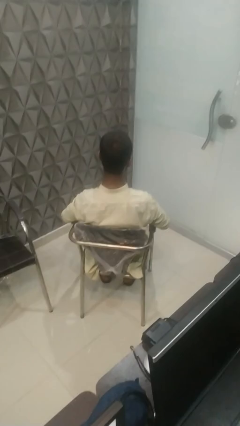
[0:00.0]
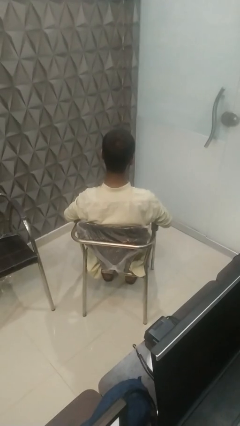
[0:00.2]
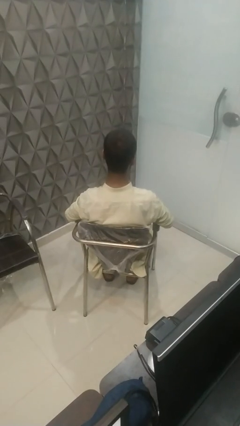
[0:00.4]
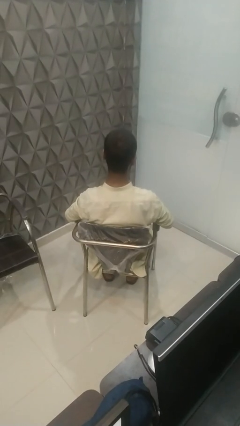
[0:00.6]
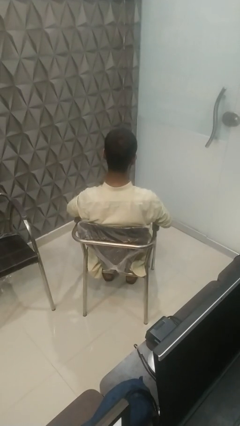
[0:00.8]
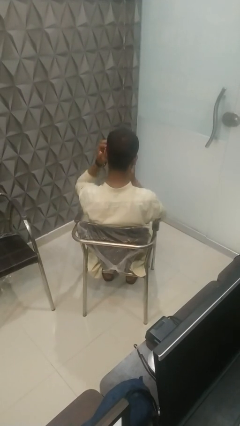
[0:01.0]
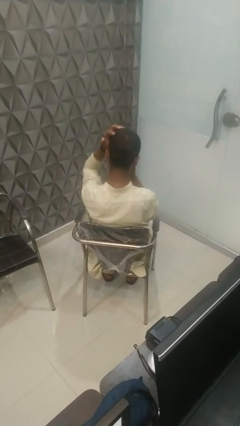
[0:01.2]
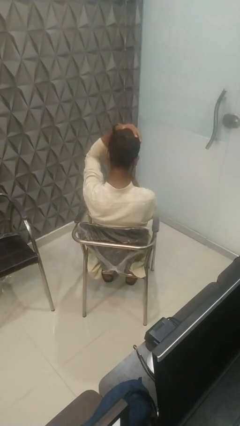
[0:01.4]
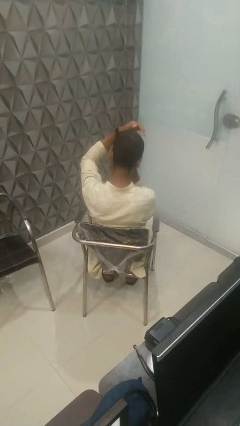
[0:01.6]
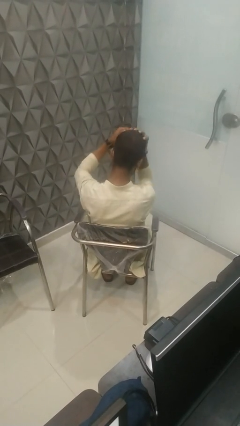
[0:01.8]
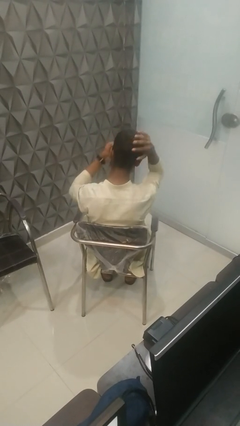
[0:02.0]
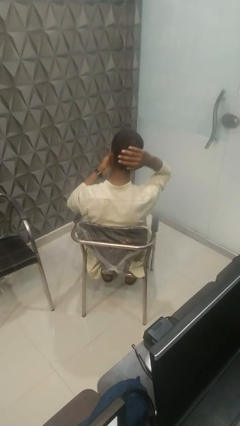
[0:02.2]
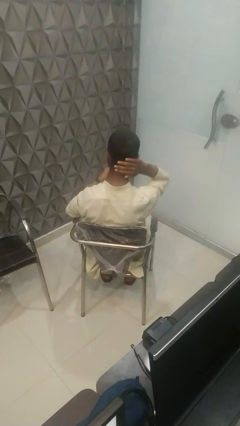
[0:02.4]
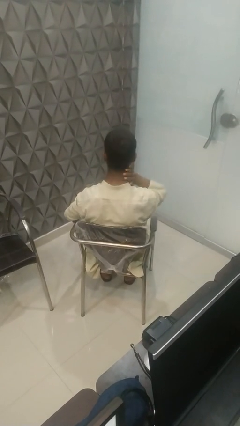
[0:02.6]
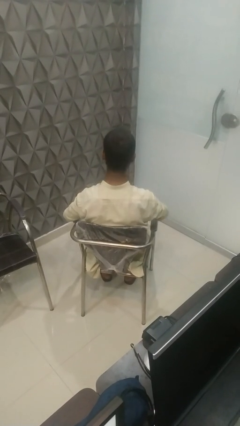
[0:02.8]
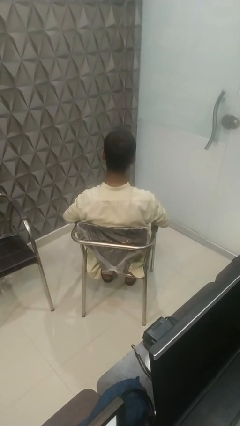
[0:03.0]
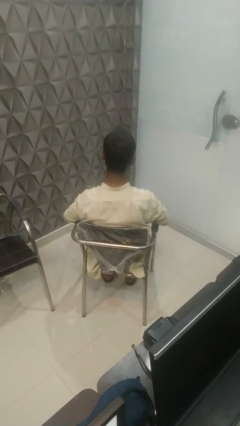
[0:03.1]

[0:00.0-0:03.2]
person strokes hair

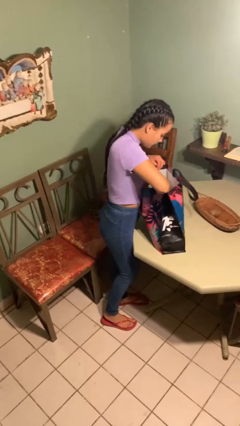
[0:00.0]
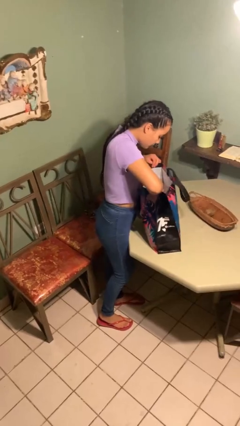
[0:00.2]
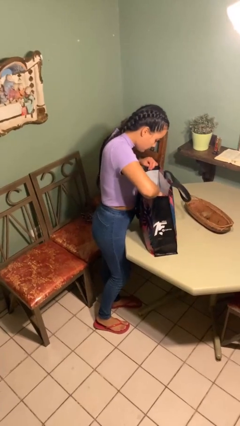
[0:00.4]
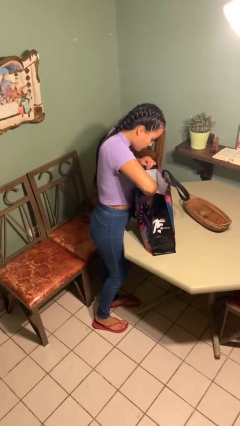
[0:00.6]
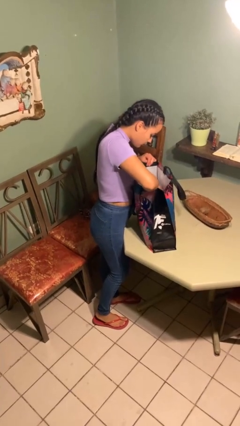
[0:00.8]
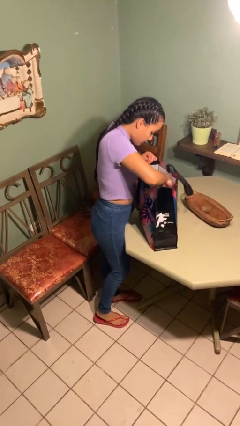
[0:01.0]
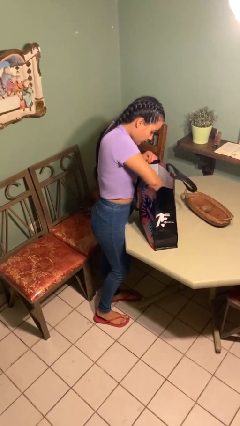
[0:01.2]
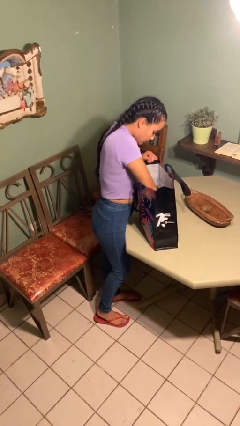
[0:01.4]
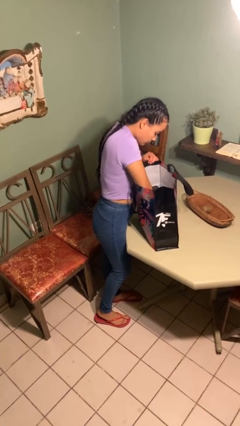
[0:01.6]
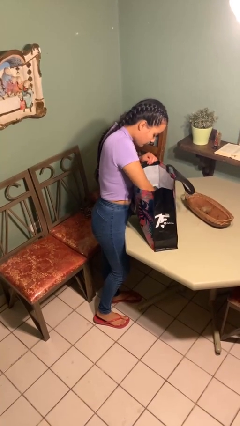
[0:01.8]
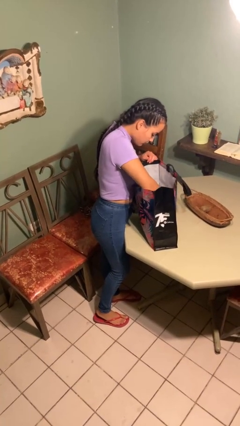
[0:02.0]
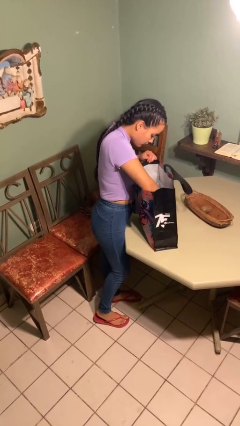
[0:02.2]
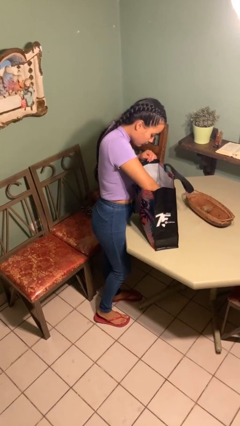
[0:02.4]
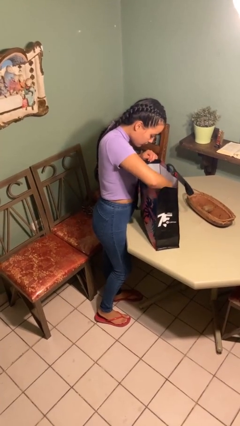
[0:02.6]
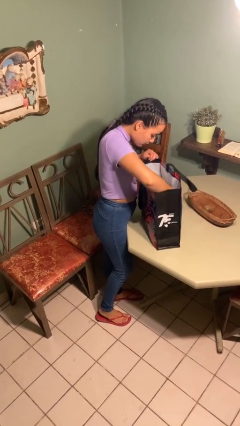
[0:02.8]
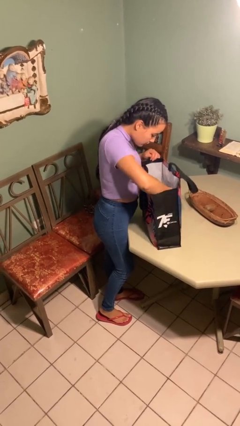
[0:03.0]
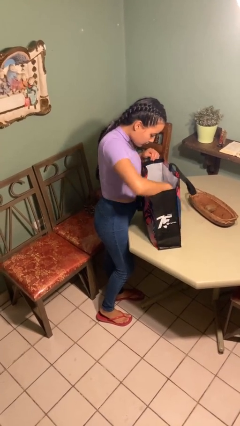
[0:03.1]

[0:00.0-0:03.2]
person searches in bag

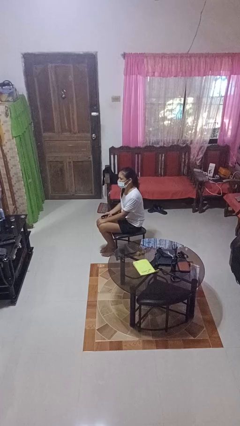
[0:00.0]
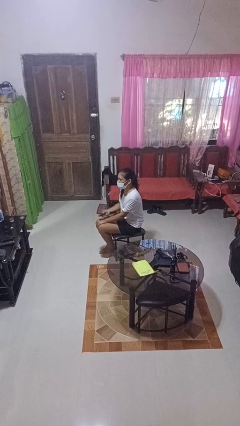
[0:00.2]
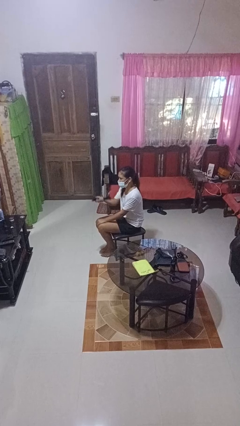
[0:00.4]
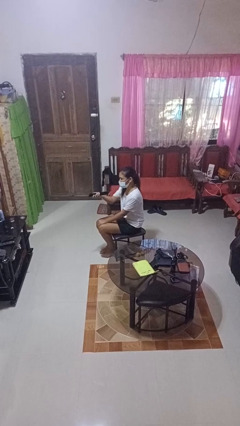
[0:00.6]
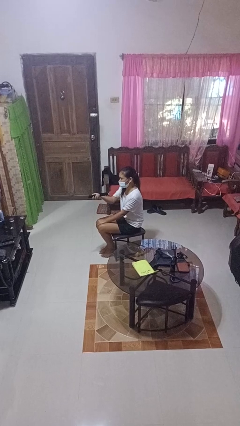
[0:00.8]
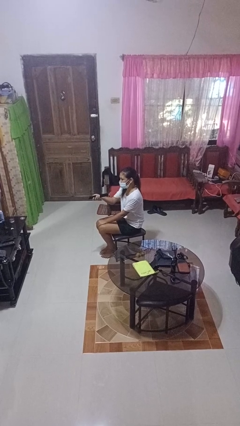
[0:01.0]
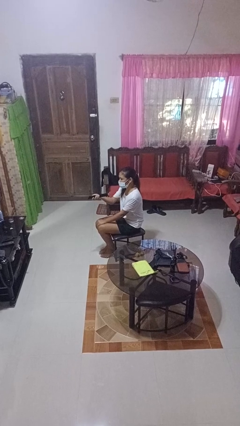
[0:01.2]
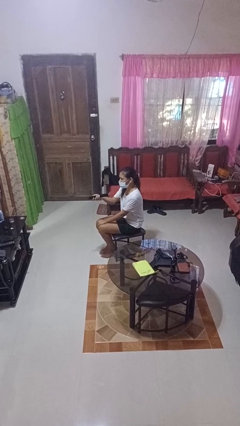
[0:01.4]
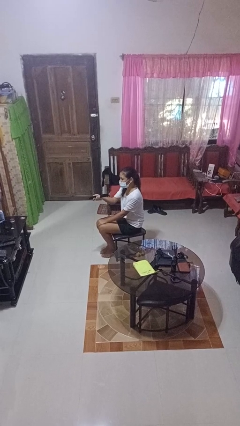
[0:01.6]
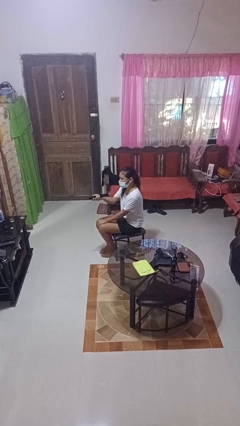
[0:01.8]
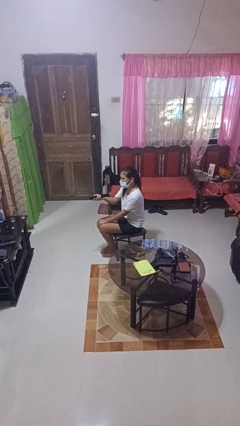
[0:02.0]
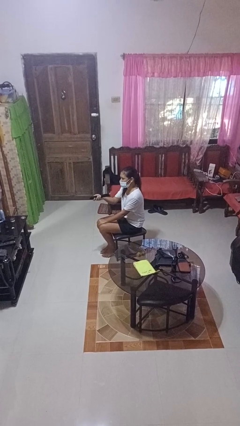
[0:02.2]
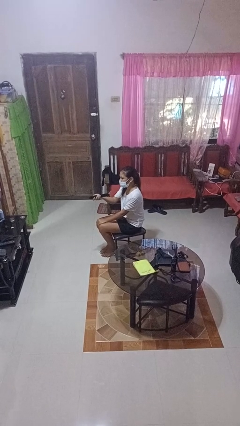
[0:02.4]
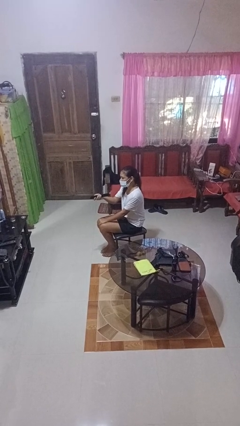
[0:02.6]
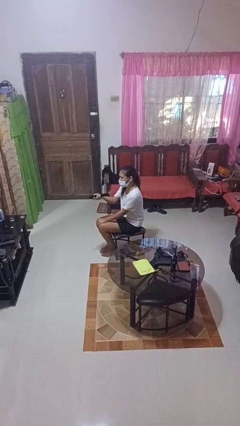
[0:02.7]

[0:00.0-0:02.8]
person uses television remote

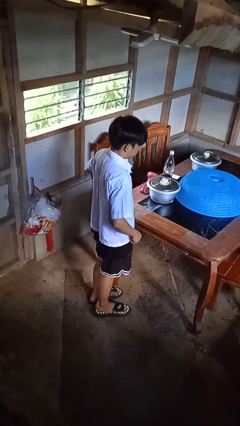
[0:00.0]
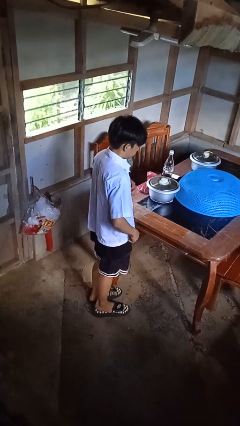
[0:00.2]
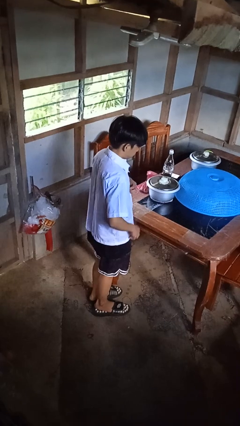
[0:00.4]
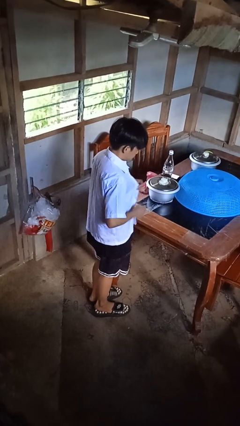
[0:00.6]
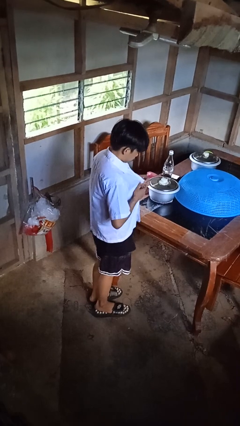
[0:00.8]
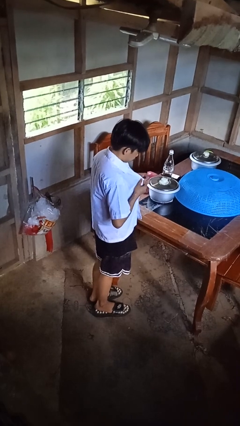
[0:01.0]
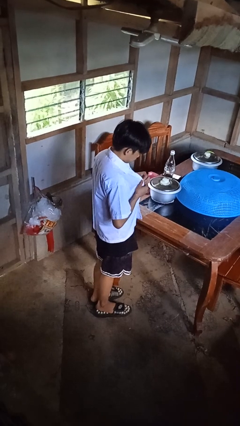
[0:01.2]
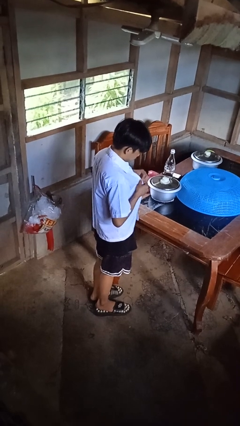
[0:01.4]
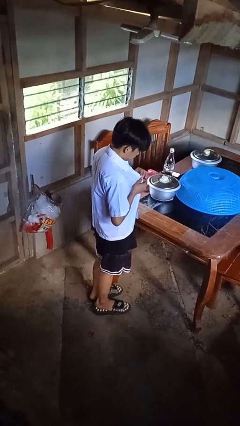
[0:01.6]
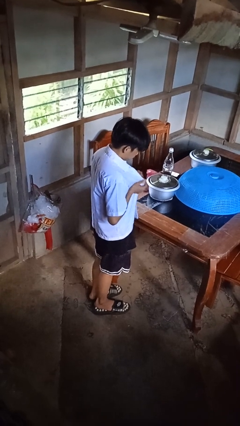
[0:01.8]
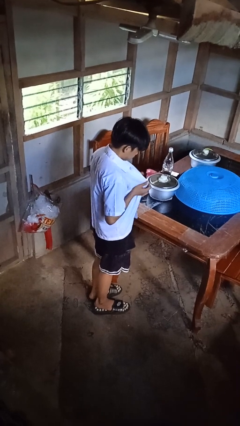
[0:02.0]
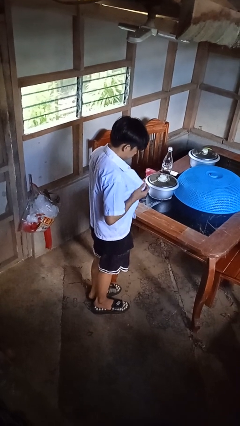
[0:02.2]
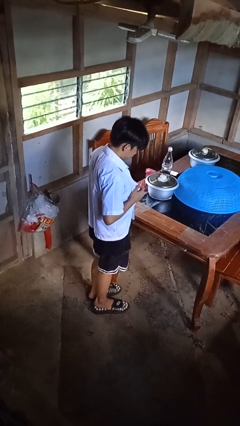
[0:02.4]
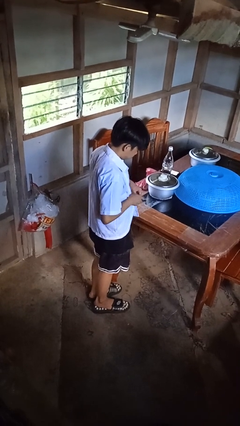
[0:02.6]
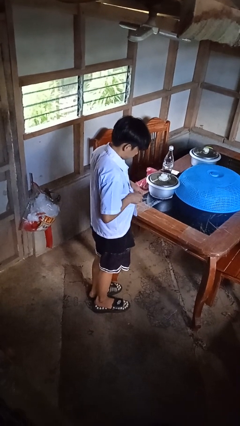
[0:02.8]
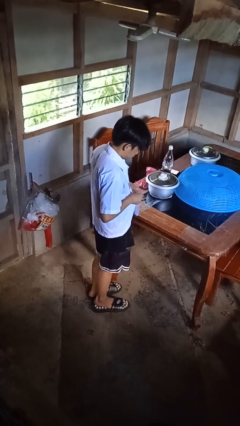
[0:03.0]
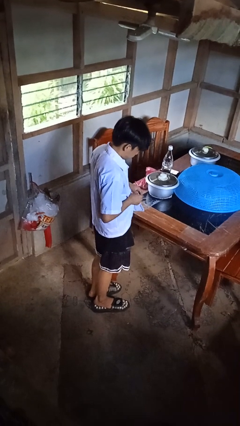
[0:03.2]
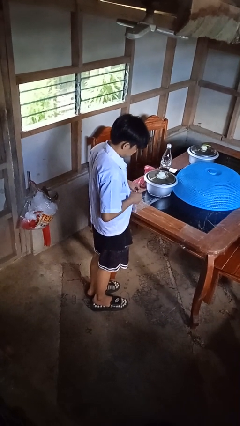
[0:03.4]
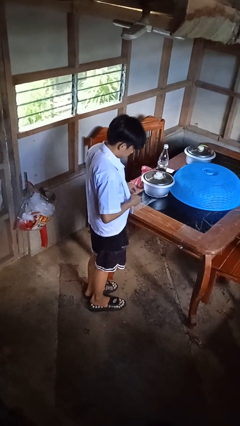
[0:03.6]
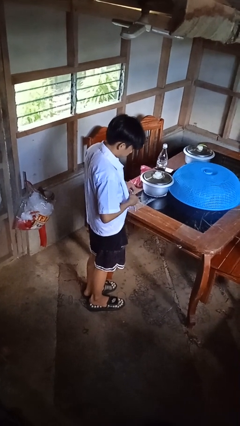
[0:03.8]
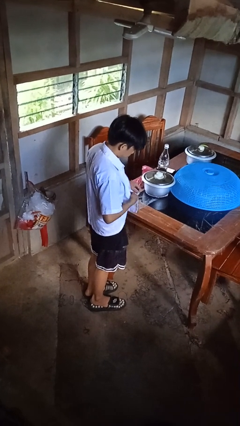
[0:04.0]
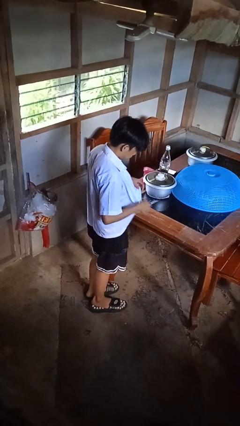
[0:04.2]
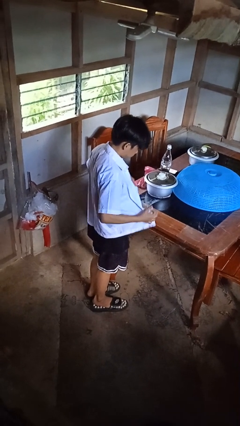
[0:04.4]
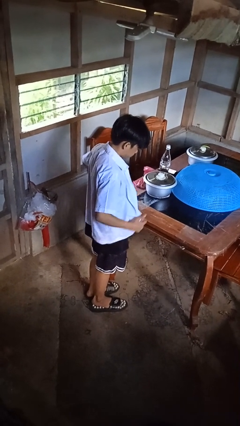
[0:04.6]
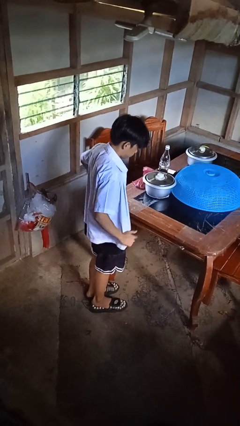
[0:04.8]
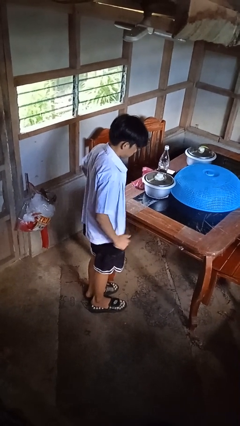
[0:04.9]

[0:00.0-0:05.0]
person unbuttons shirt

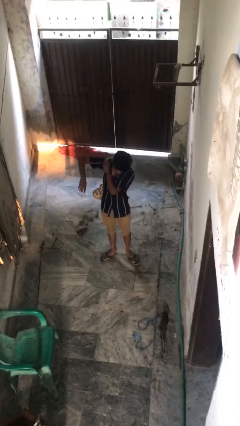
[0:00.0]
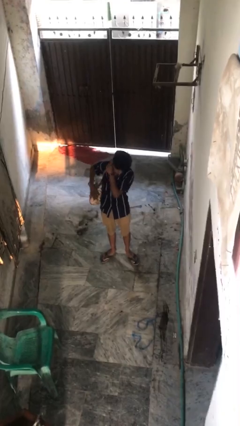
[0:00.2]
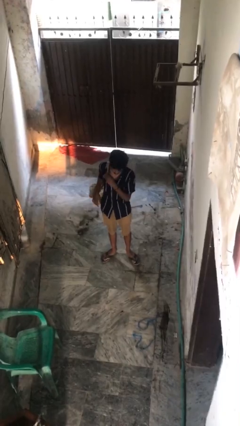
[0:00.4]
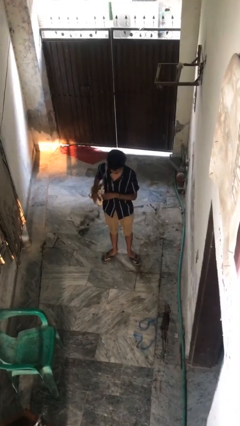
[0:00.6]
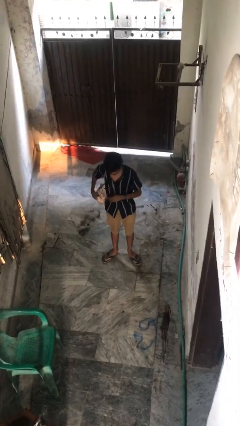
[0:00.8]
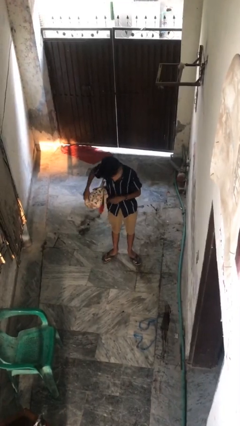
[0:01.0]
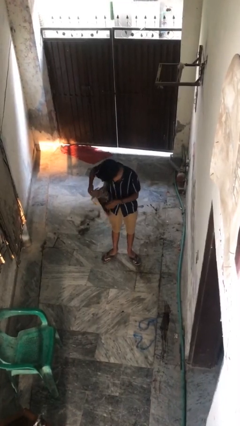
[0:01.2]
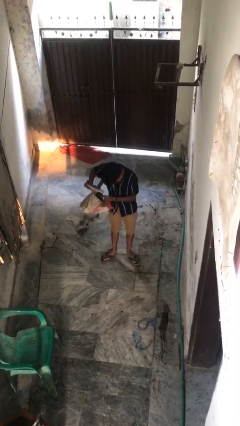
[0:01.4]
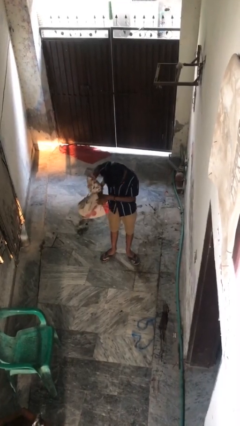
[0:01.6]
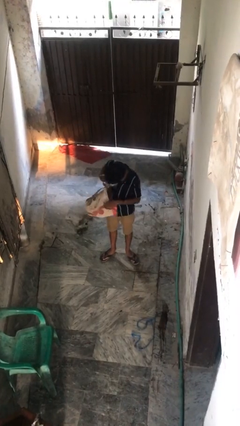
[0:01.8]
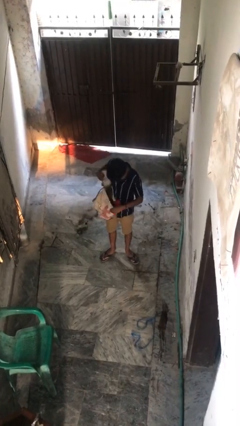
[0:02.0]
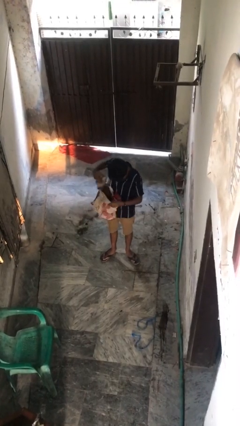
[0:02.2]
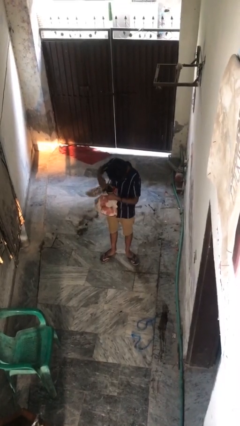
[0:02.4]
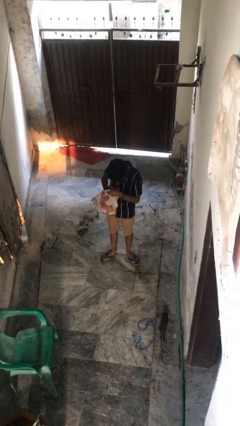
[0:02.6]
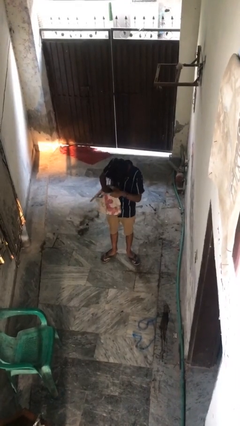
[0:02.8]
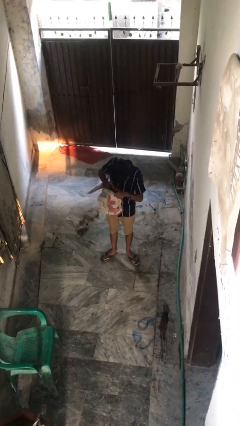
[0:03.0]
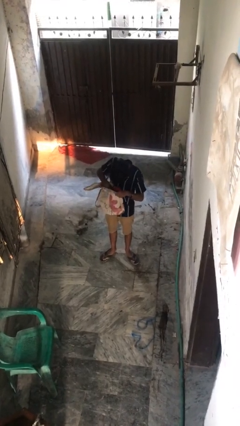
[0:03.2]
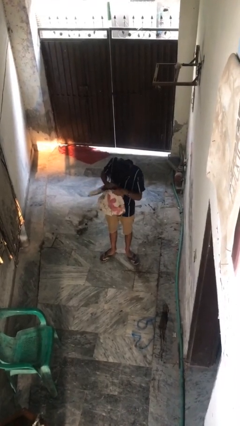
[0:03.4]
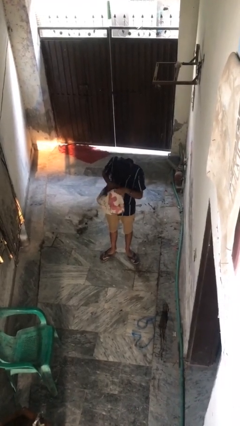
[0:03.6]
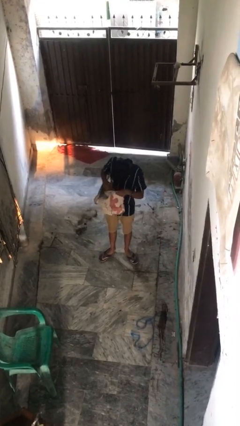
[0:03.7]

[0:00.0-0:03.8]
person searches in backpack
